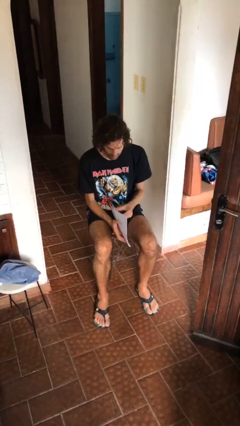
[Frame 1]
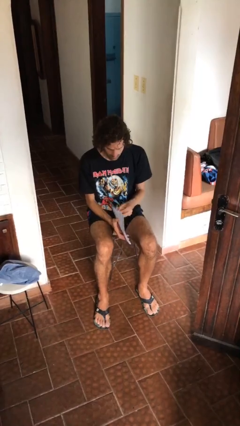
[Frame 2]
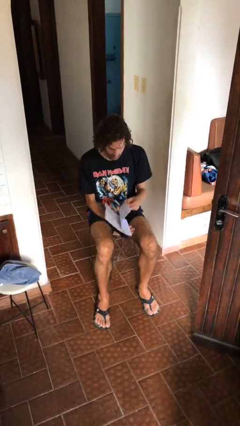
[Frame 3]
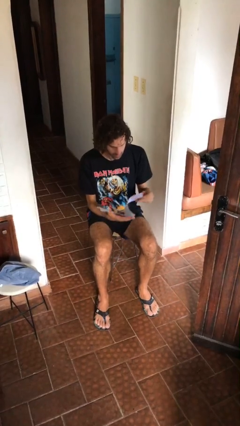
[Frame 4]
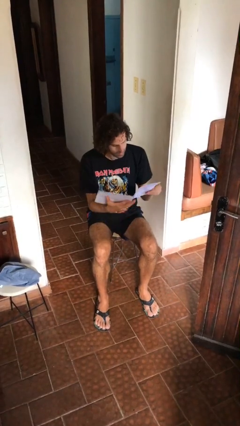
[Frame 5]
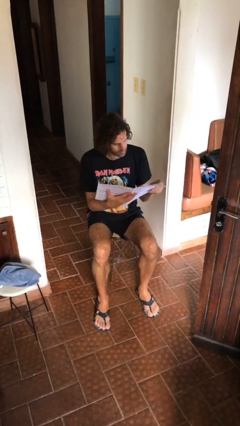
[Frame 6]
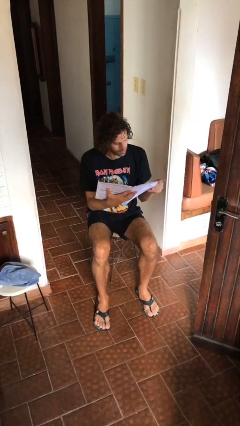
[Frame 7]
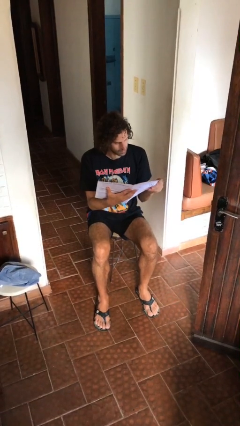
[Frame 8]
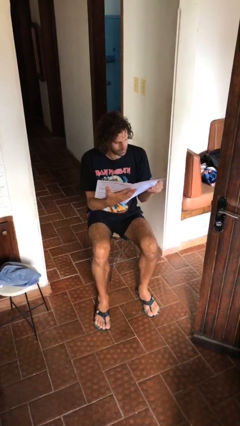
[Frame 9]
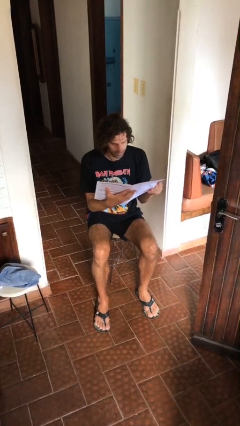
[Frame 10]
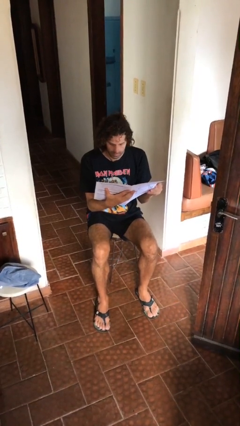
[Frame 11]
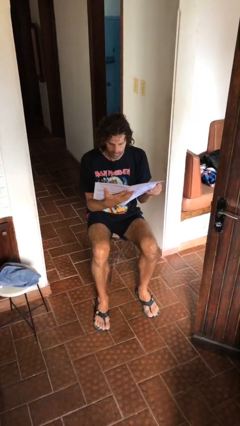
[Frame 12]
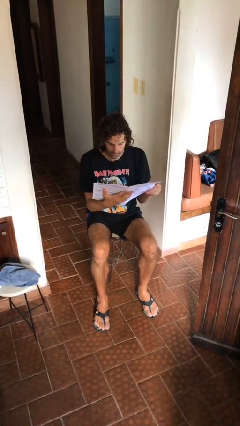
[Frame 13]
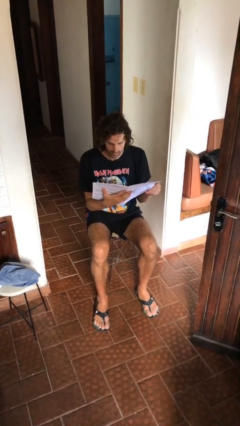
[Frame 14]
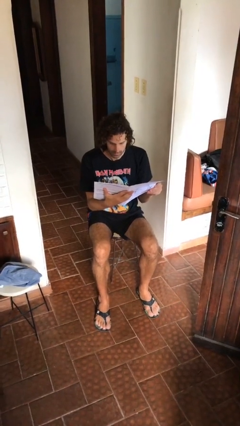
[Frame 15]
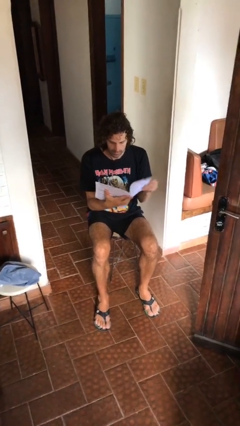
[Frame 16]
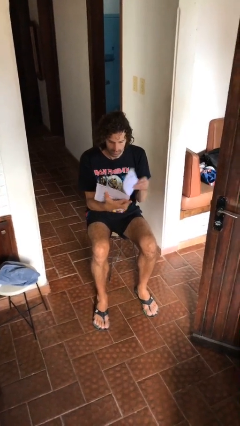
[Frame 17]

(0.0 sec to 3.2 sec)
person reads document

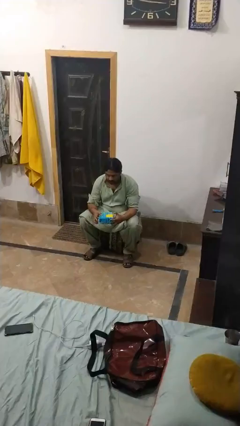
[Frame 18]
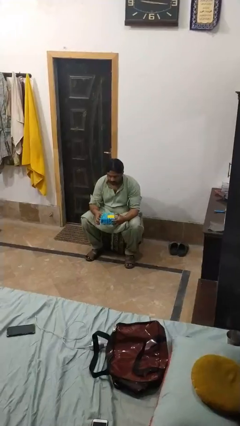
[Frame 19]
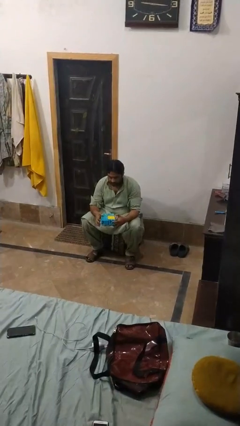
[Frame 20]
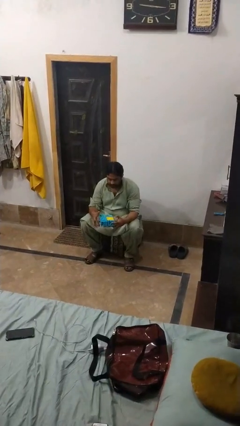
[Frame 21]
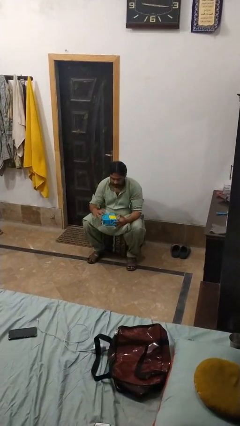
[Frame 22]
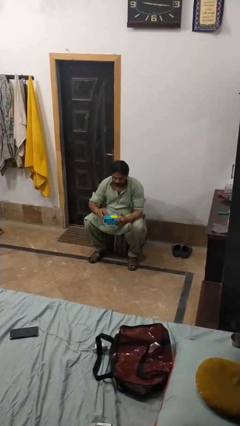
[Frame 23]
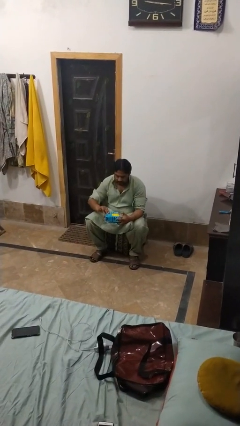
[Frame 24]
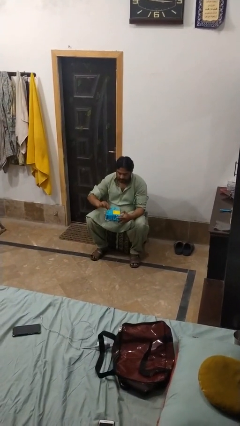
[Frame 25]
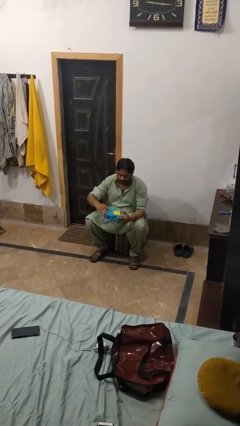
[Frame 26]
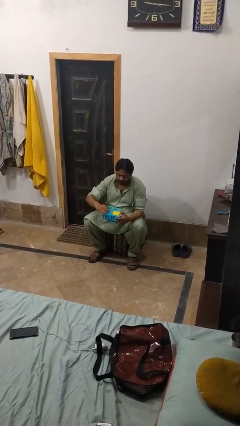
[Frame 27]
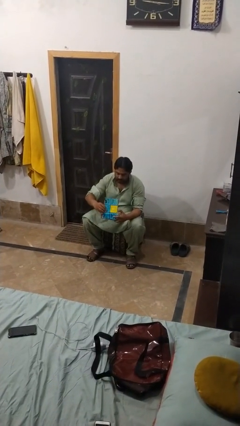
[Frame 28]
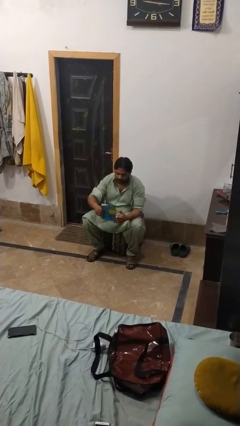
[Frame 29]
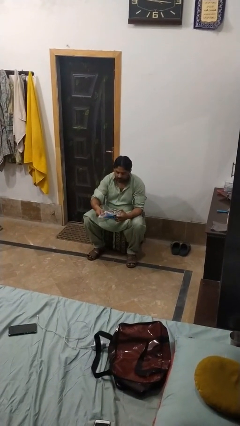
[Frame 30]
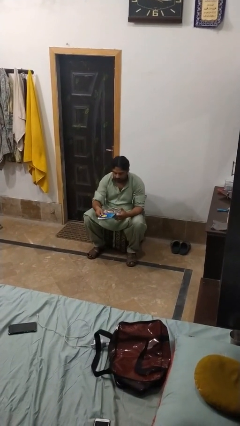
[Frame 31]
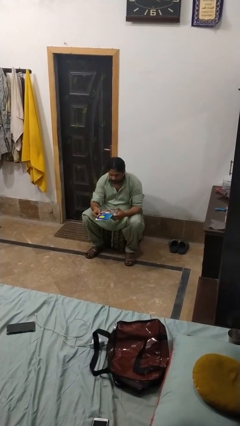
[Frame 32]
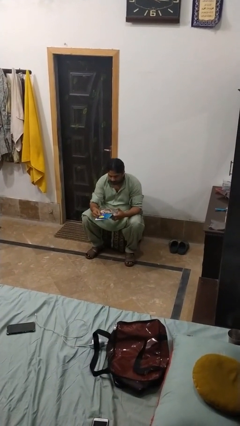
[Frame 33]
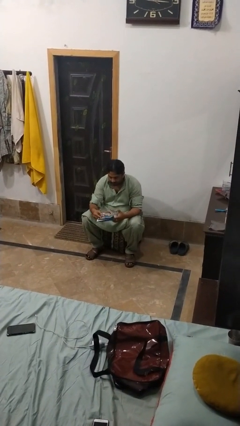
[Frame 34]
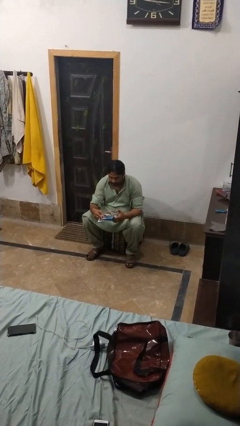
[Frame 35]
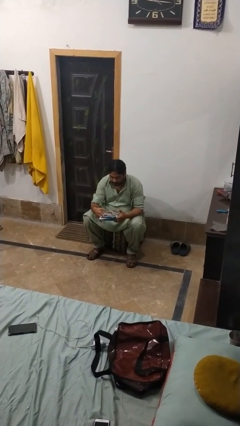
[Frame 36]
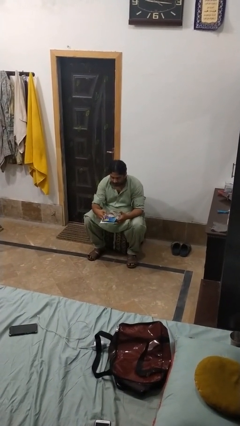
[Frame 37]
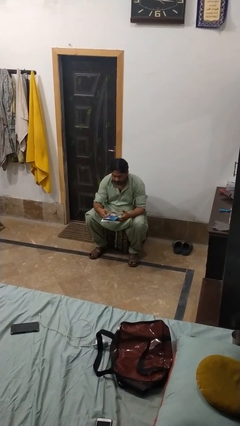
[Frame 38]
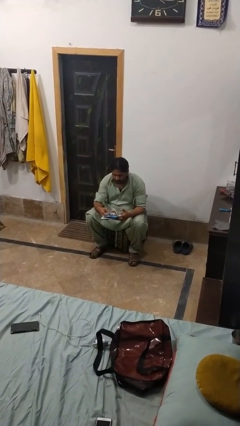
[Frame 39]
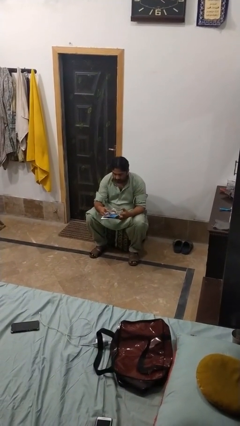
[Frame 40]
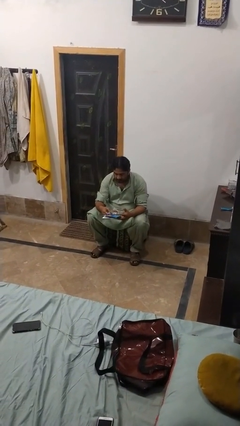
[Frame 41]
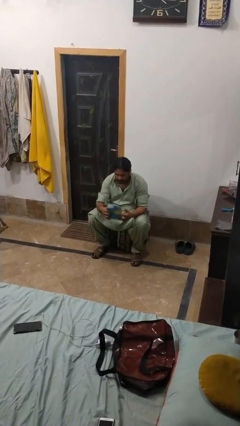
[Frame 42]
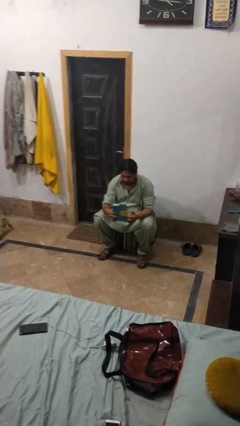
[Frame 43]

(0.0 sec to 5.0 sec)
person opens jewelry box

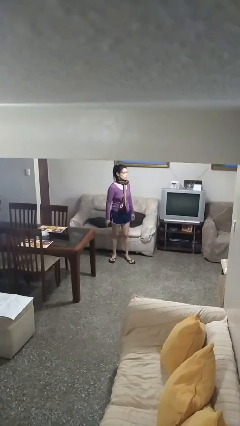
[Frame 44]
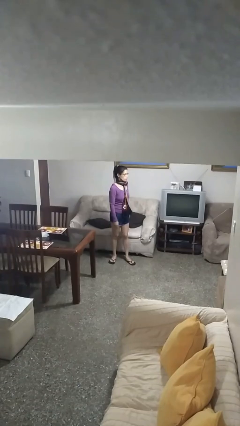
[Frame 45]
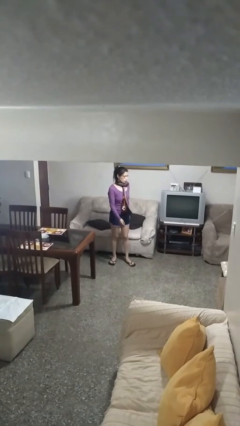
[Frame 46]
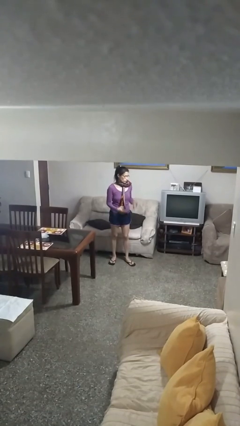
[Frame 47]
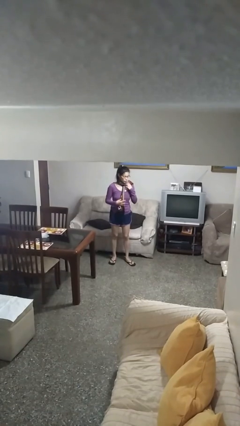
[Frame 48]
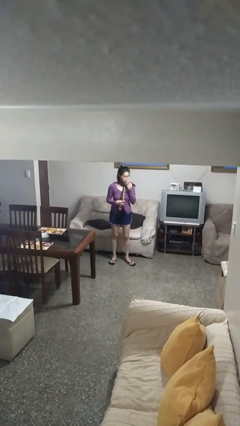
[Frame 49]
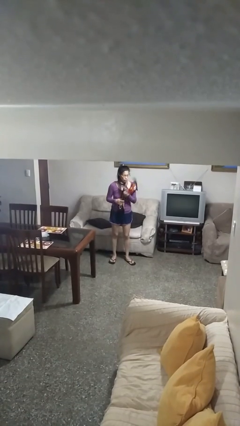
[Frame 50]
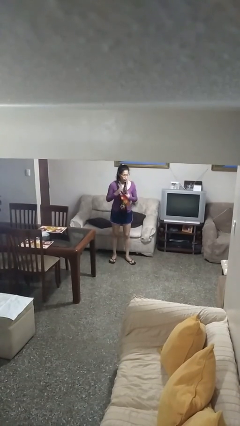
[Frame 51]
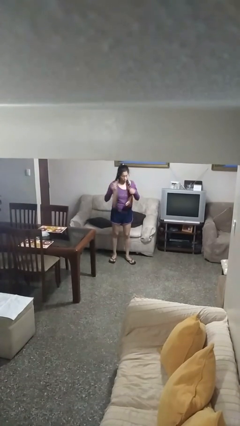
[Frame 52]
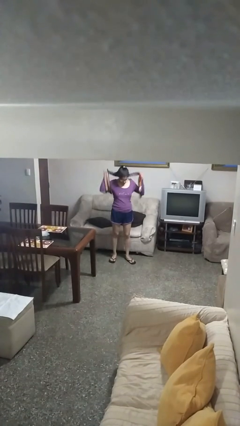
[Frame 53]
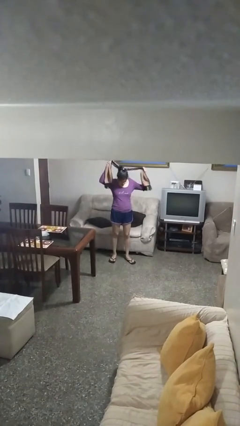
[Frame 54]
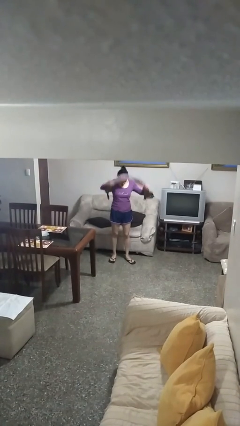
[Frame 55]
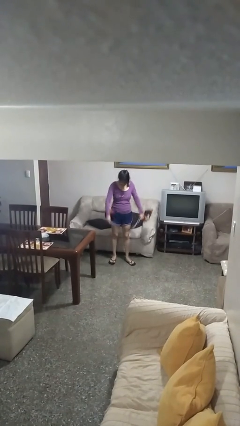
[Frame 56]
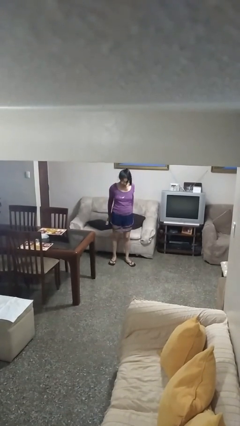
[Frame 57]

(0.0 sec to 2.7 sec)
person takes off scarf

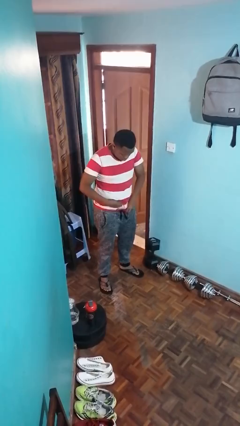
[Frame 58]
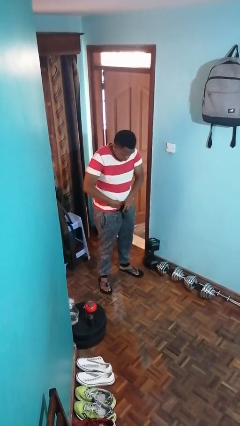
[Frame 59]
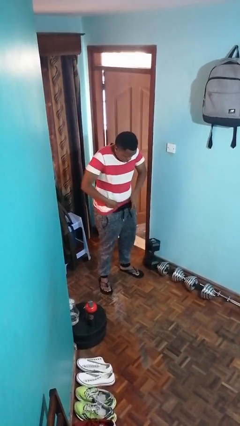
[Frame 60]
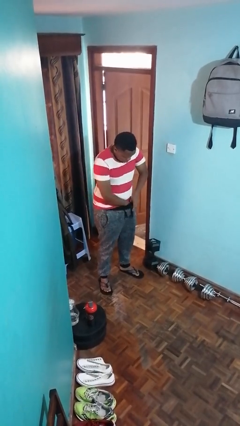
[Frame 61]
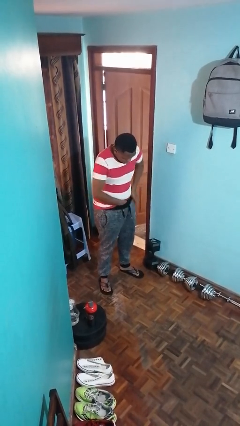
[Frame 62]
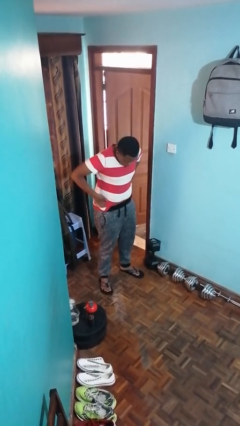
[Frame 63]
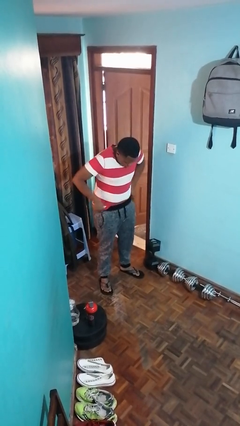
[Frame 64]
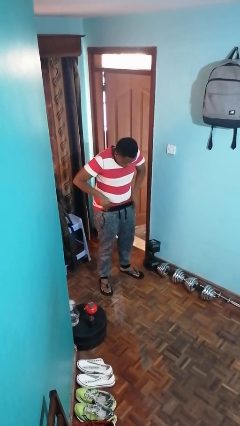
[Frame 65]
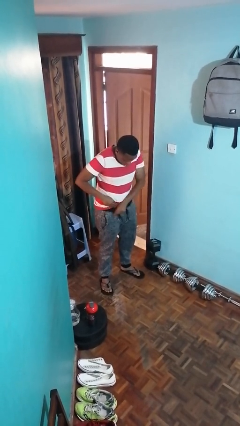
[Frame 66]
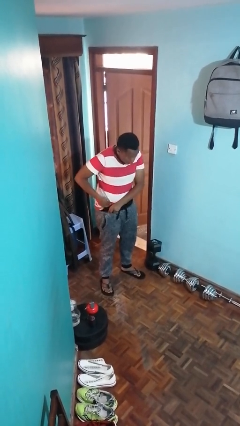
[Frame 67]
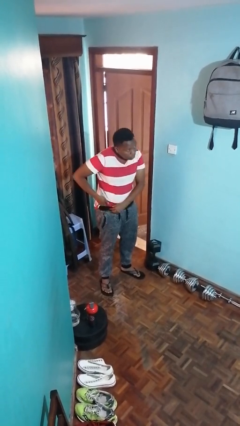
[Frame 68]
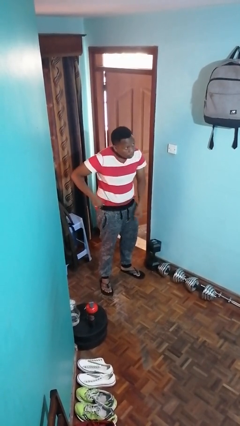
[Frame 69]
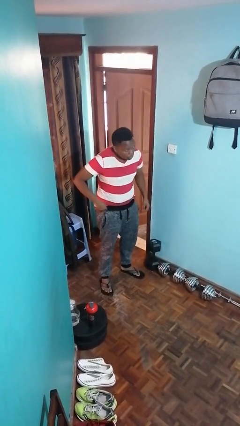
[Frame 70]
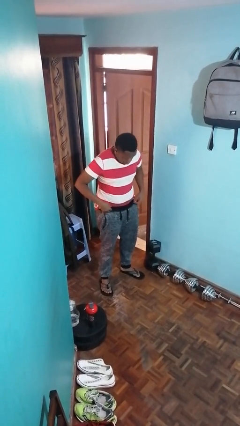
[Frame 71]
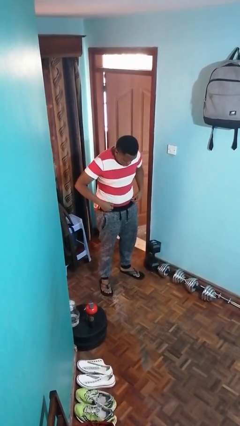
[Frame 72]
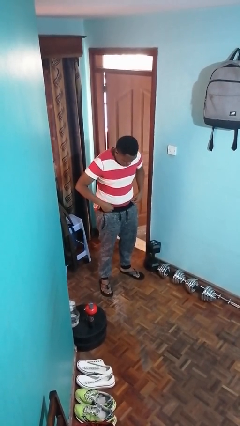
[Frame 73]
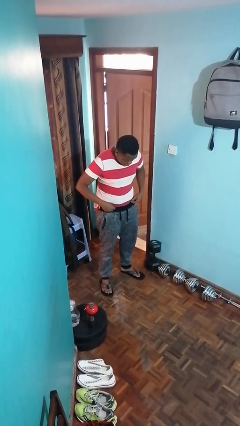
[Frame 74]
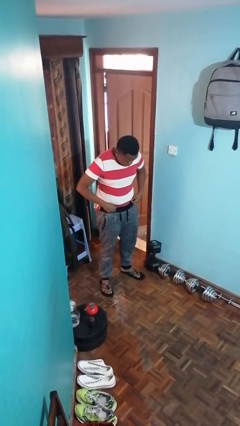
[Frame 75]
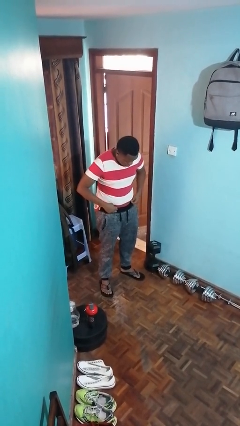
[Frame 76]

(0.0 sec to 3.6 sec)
person tucks in shirt

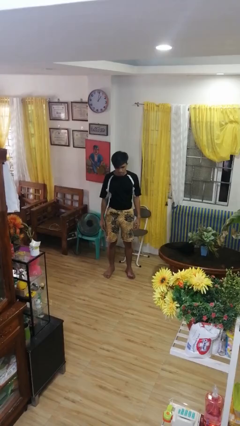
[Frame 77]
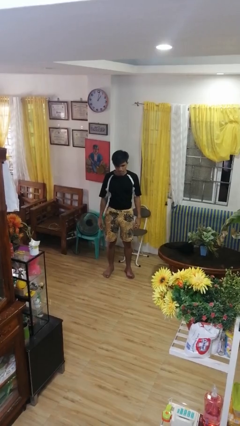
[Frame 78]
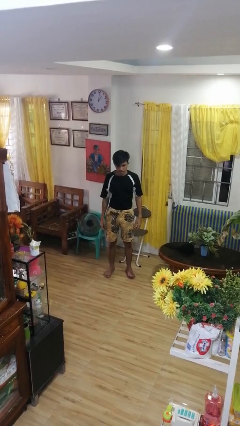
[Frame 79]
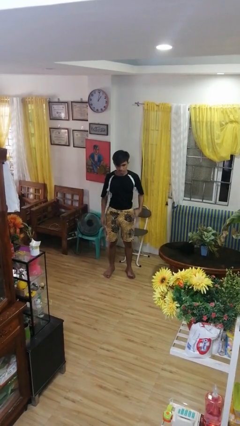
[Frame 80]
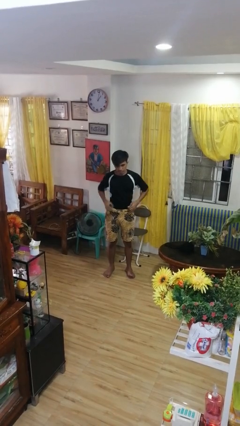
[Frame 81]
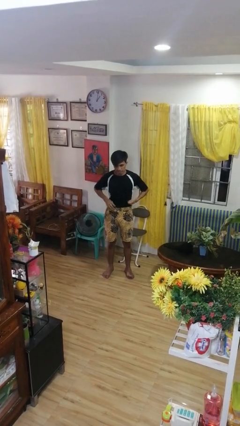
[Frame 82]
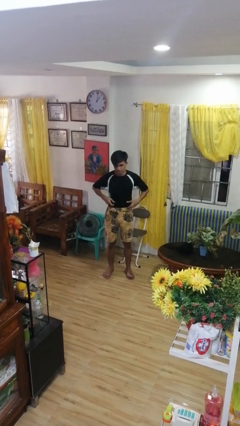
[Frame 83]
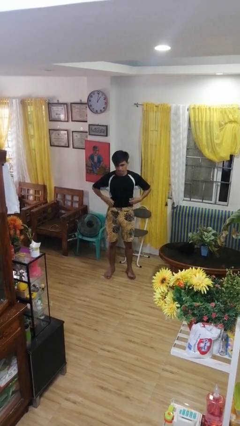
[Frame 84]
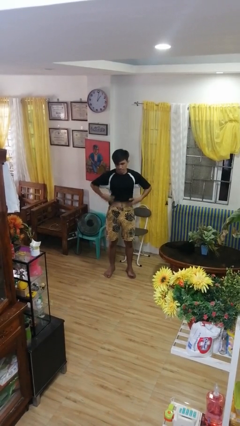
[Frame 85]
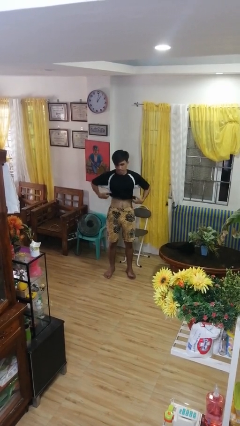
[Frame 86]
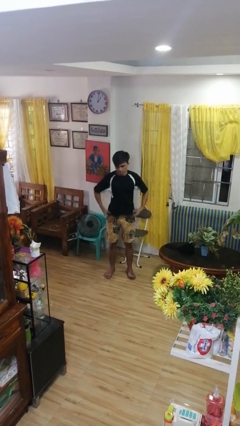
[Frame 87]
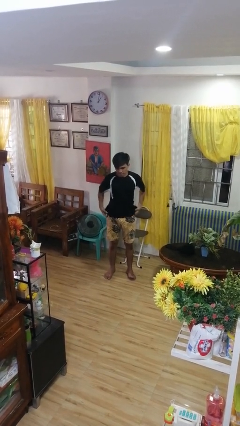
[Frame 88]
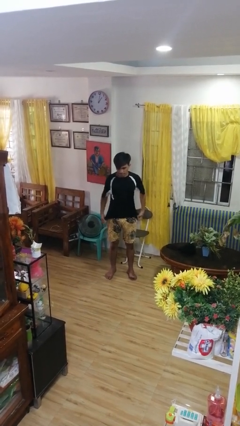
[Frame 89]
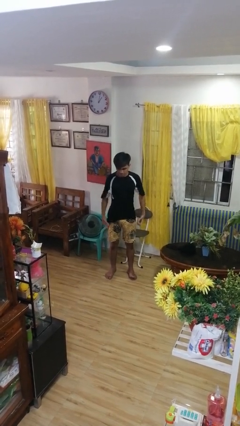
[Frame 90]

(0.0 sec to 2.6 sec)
person untucks shirt

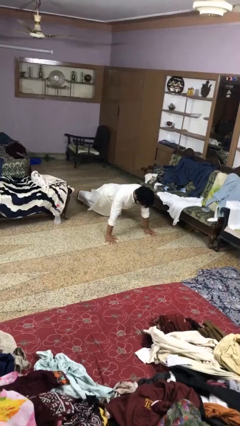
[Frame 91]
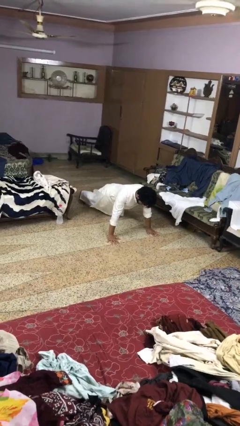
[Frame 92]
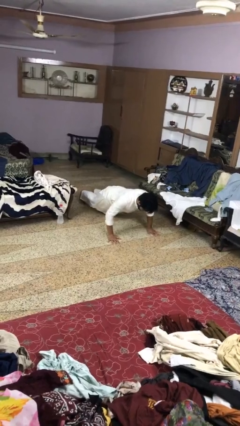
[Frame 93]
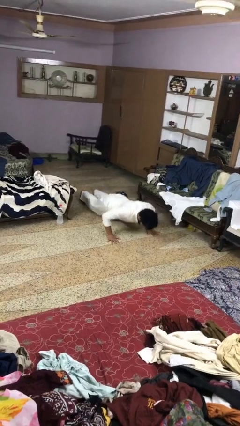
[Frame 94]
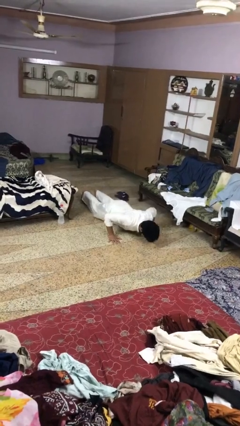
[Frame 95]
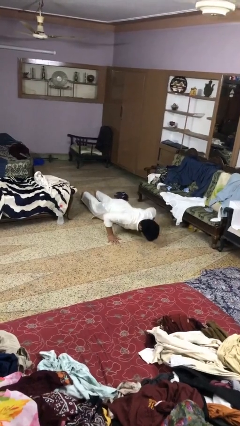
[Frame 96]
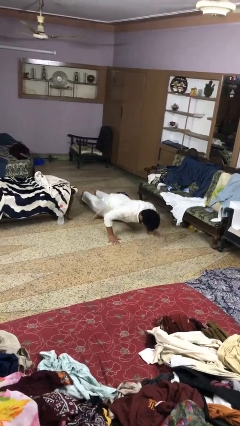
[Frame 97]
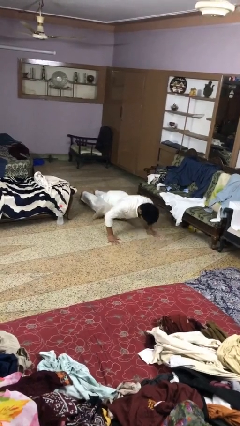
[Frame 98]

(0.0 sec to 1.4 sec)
person exercises with pushup
